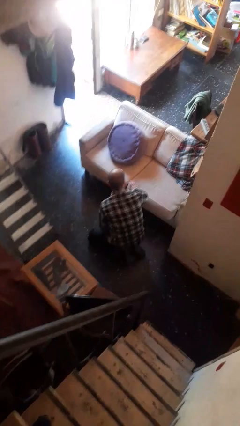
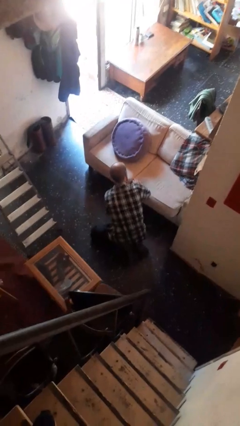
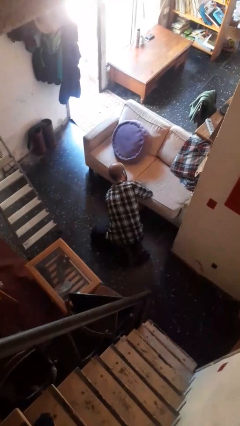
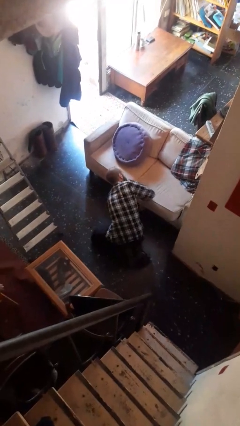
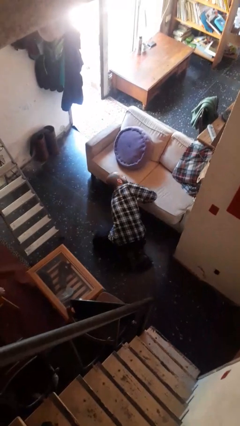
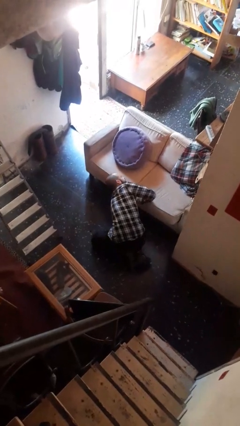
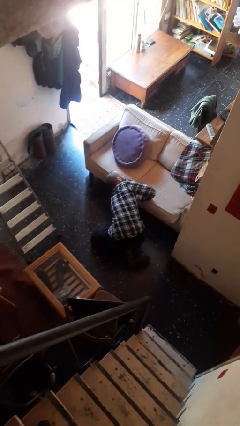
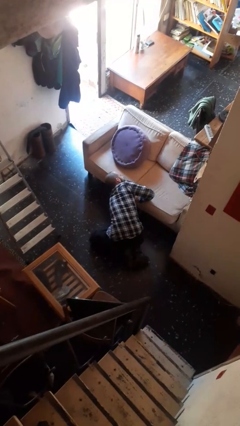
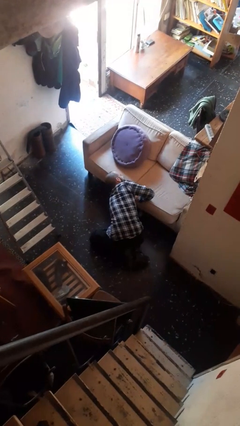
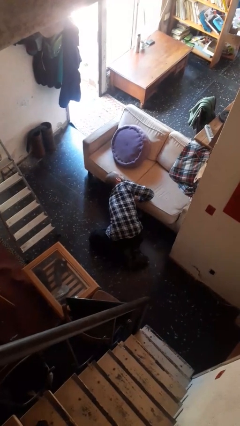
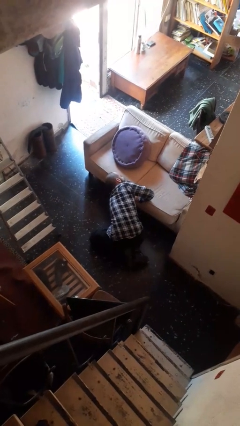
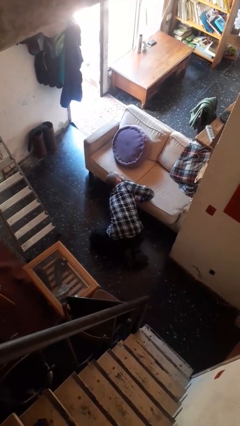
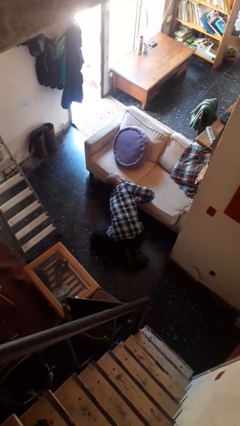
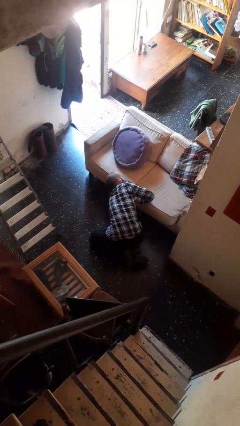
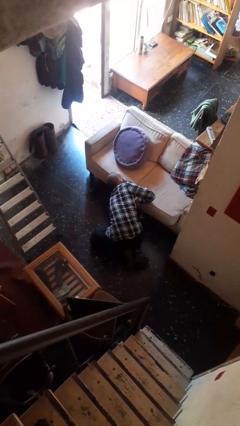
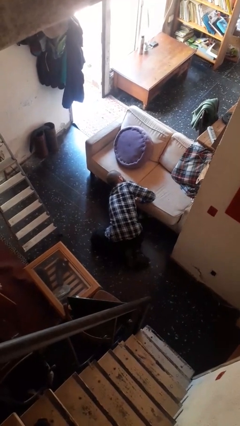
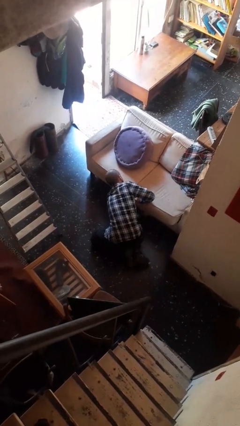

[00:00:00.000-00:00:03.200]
person searches under couch

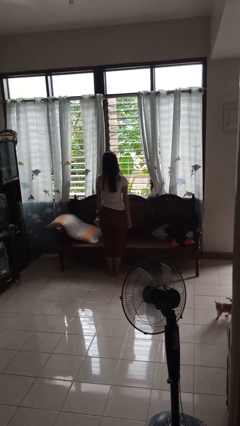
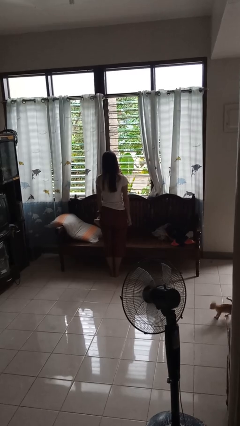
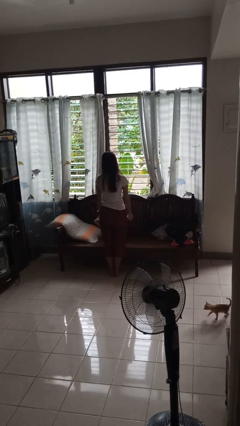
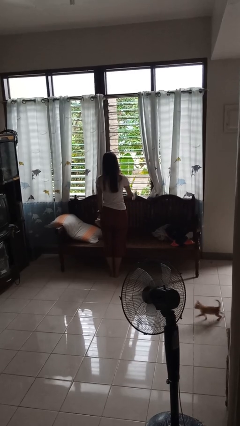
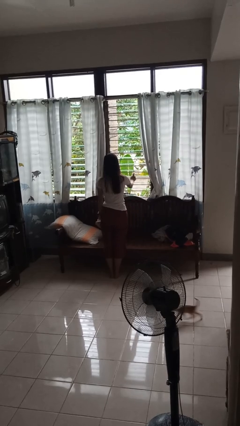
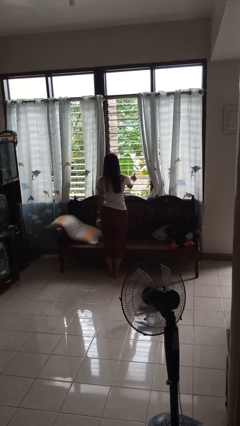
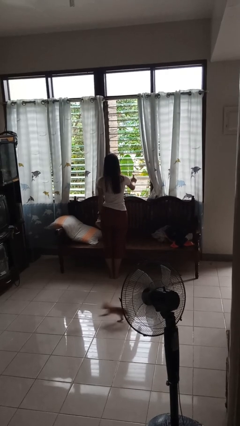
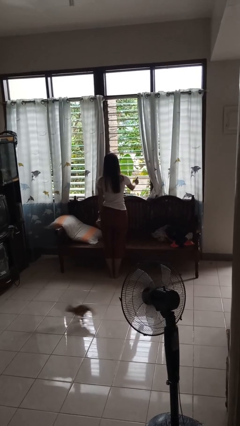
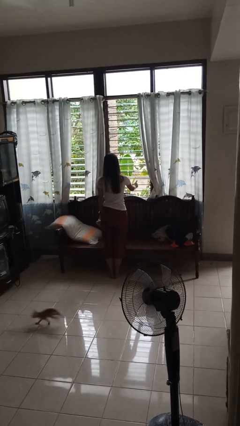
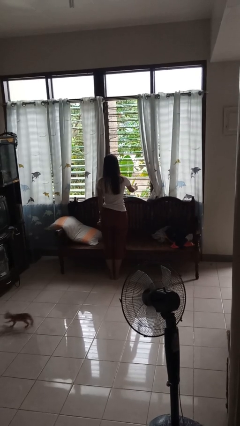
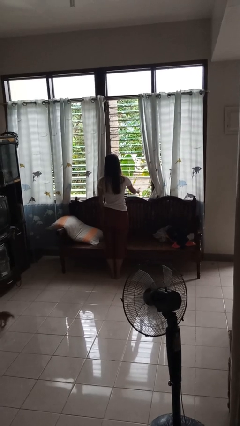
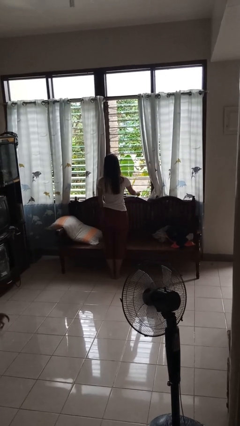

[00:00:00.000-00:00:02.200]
person sprays from bottle

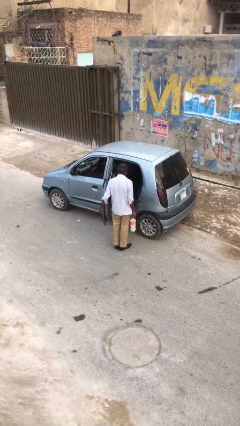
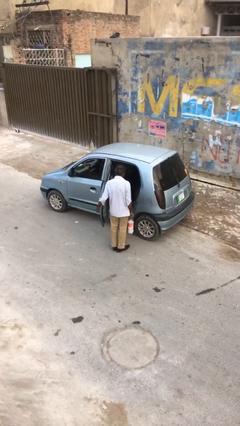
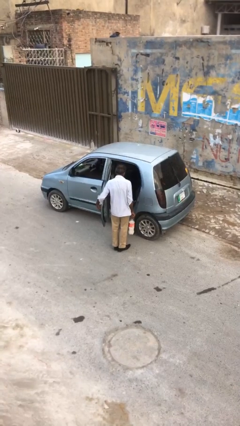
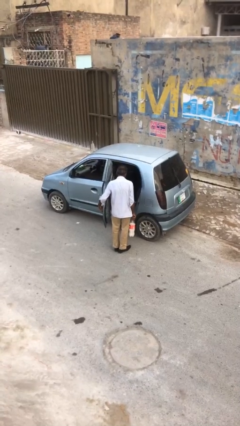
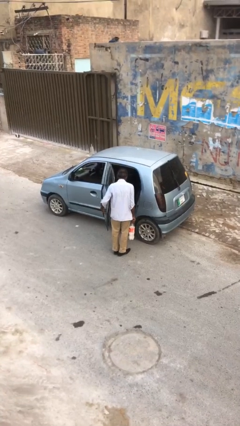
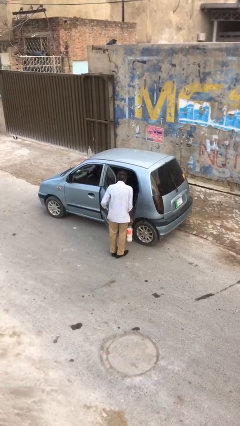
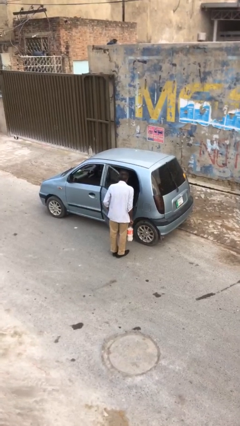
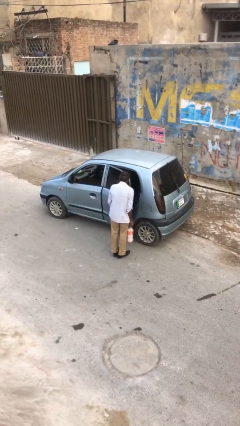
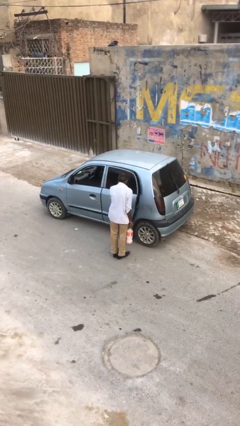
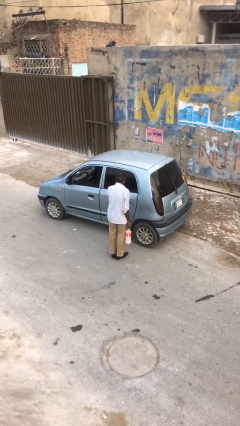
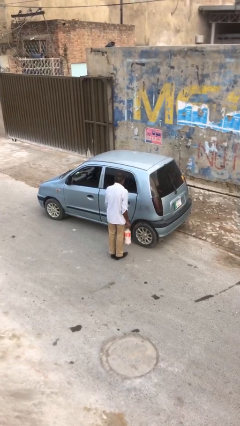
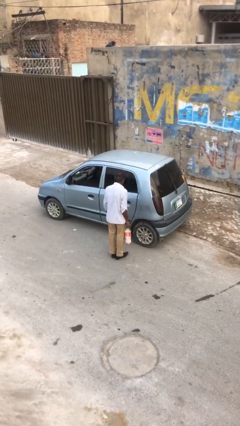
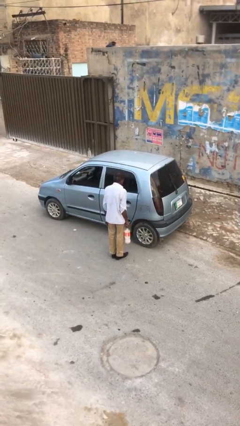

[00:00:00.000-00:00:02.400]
person closes car door

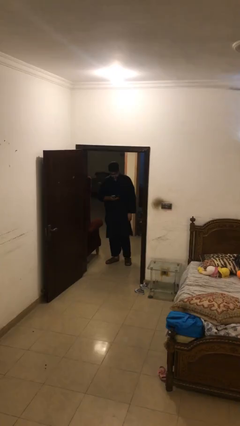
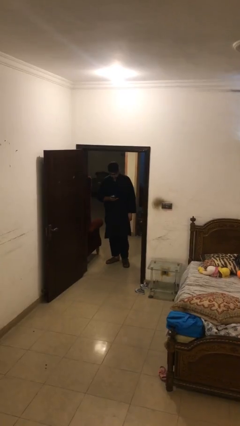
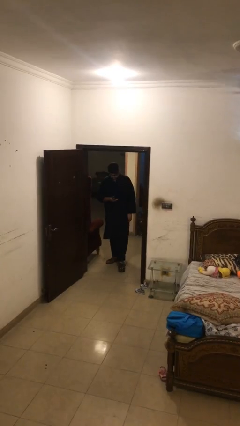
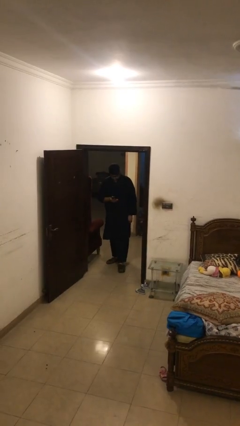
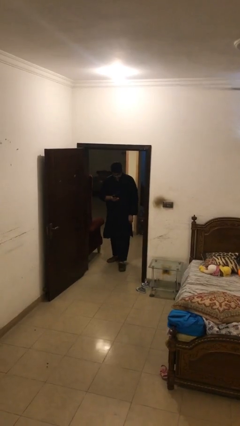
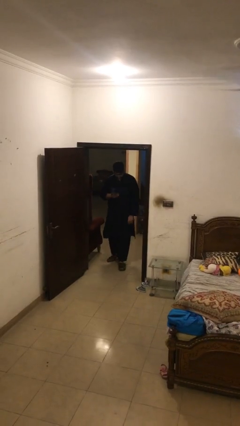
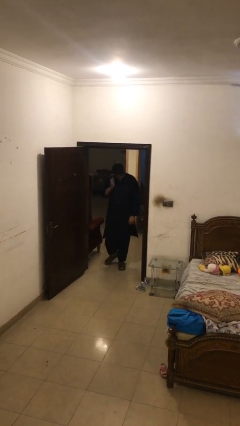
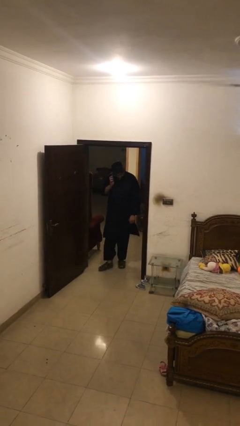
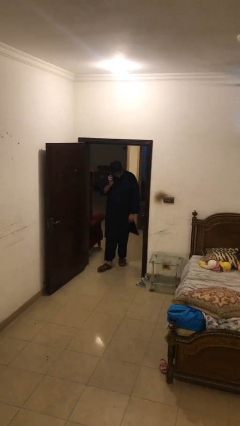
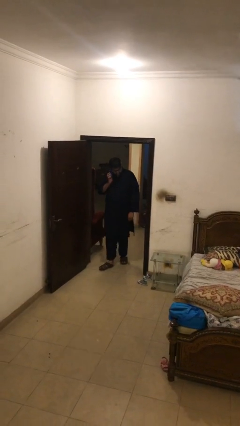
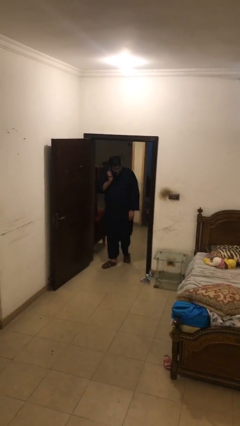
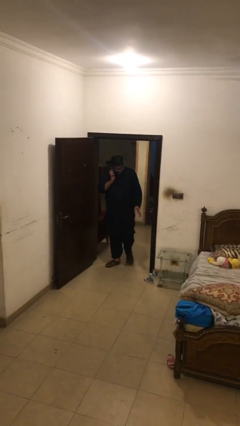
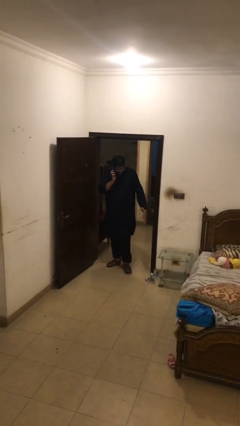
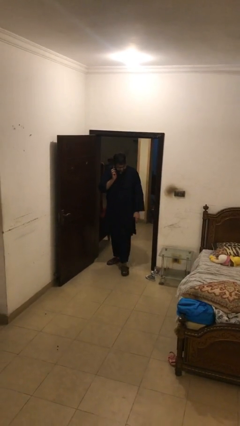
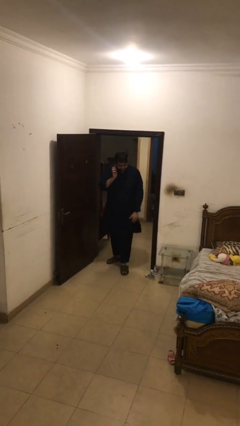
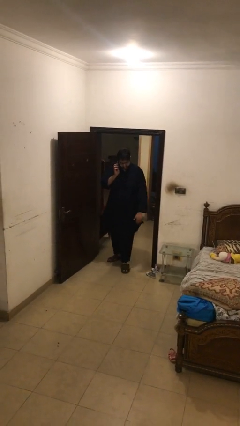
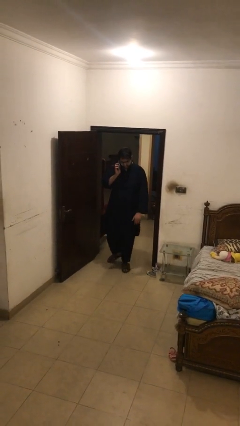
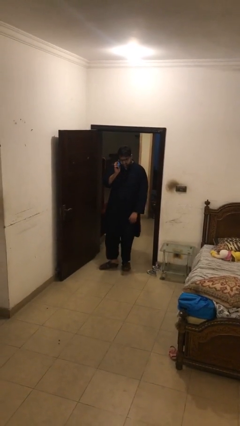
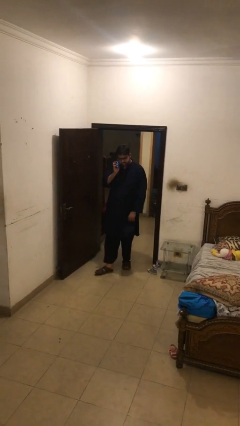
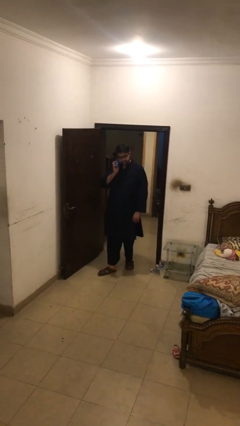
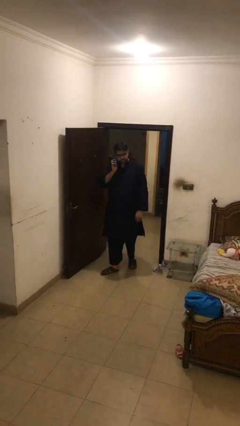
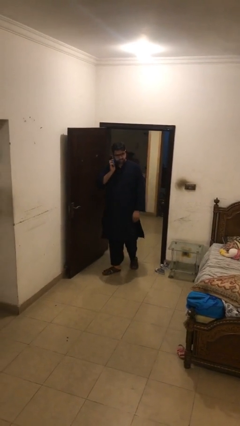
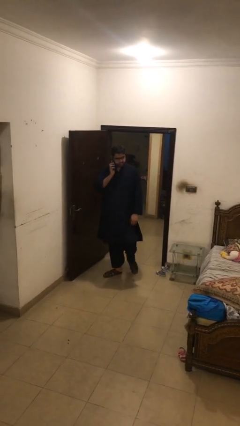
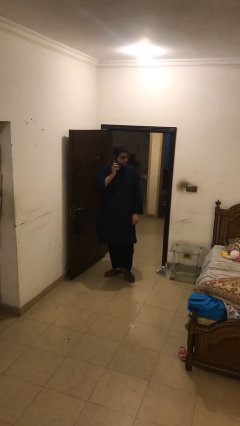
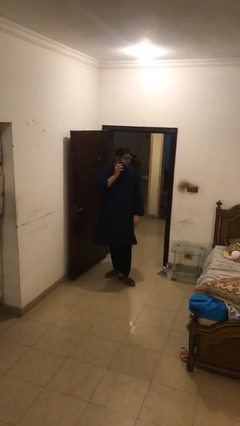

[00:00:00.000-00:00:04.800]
person enters scene through structure

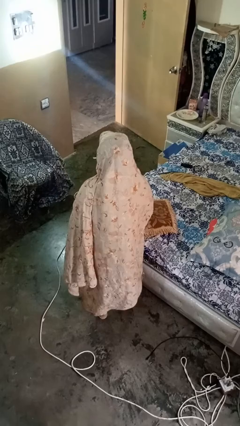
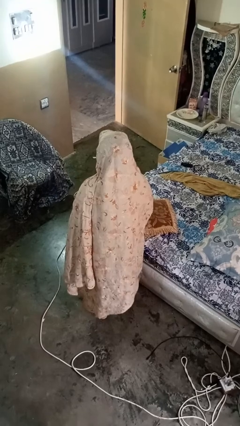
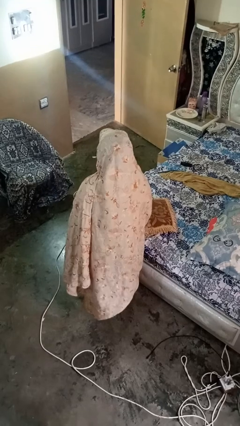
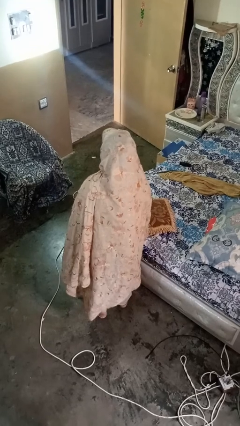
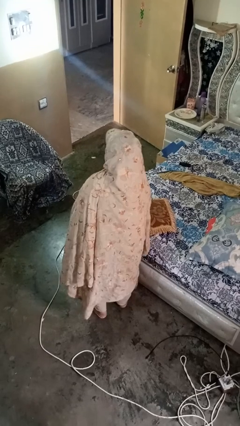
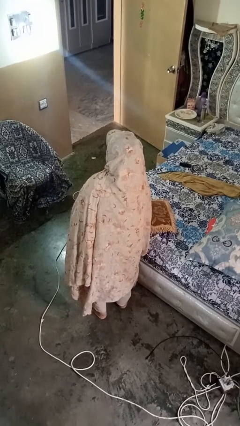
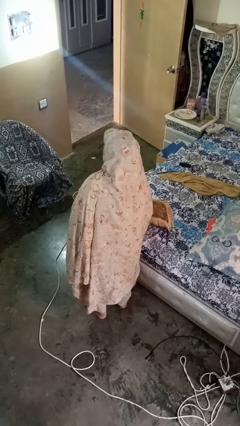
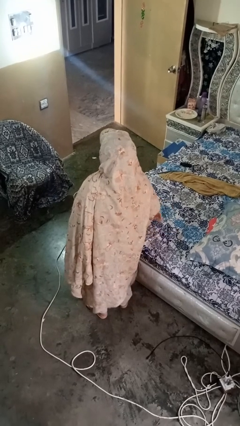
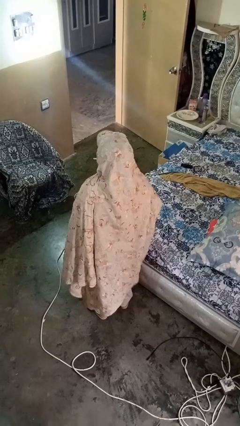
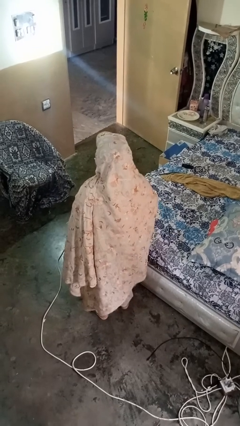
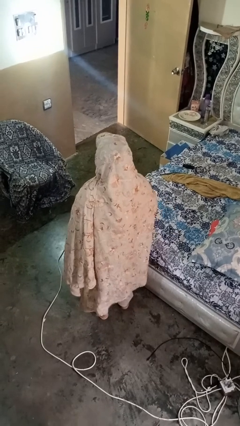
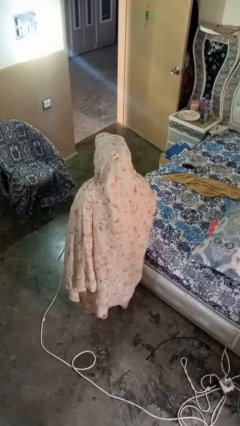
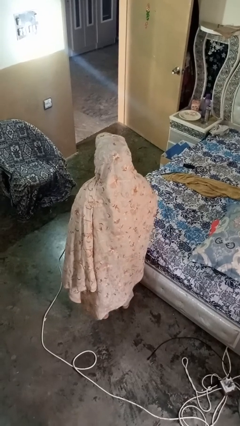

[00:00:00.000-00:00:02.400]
person picks up object from bed

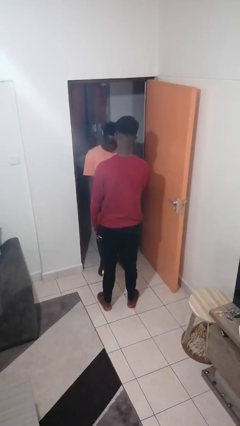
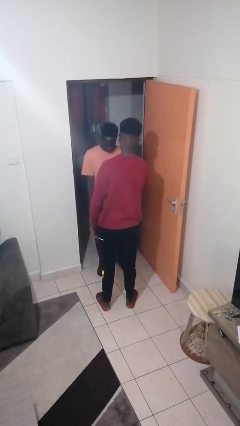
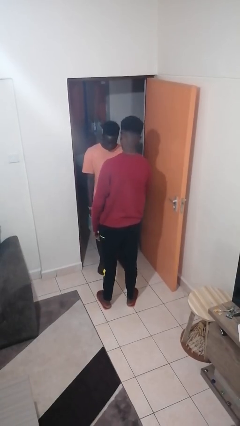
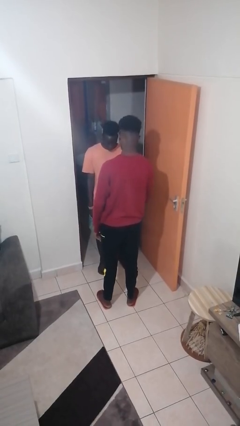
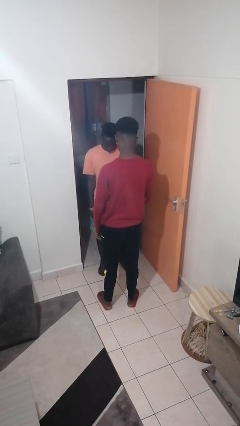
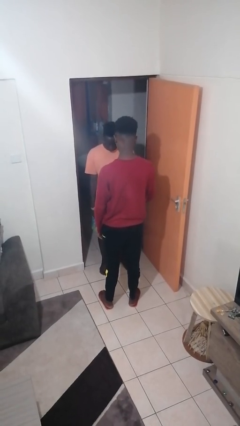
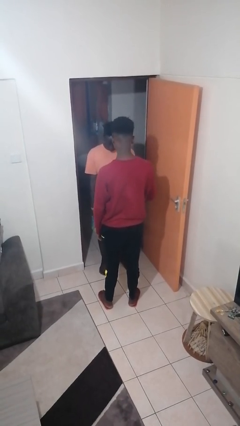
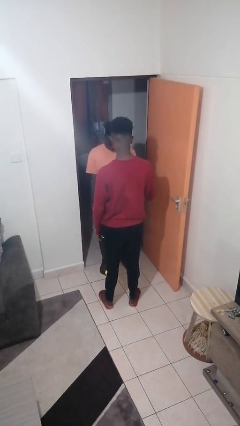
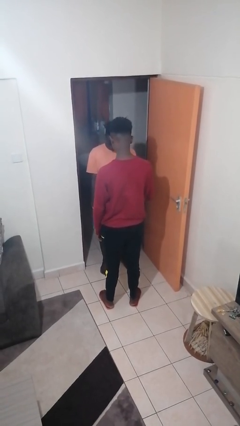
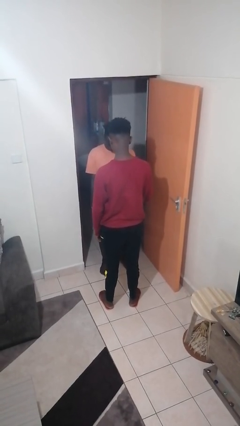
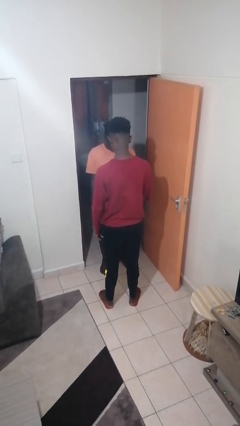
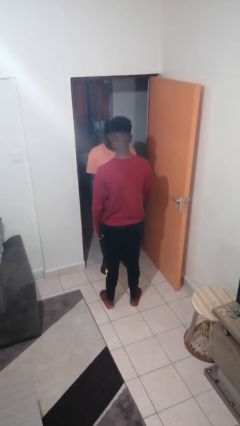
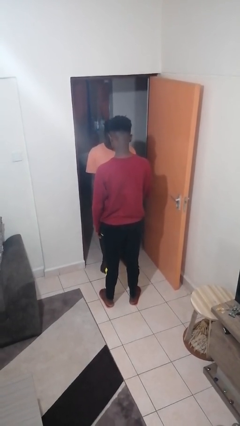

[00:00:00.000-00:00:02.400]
person grabs person by forearm
